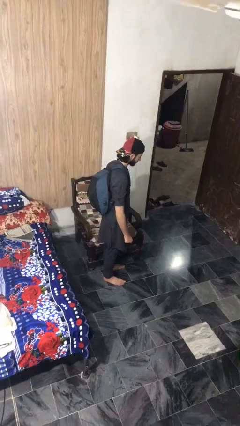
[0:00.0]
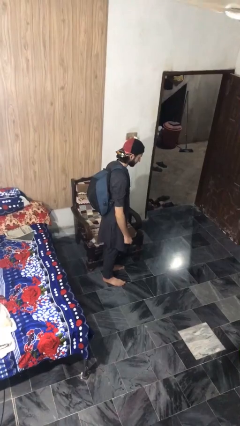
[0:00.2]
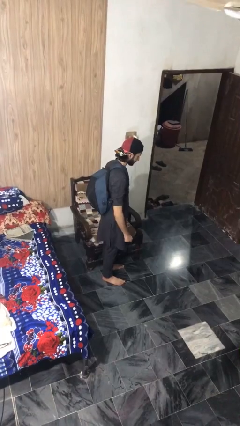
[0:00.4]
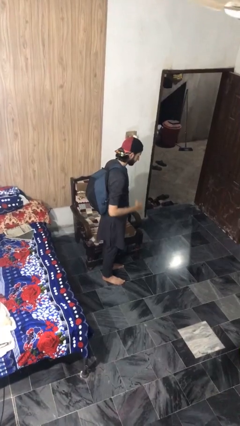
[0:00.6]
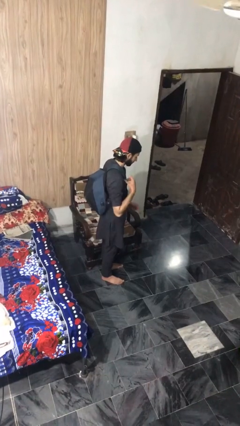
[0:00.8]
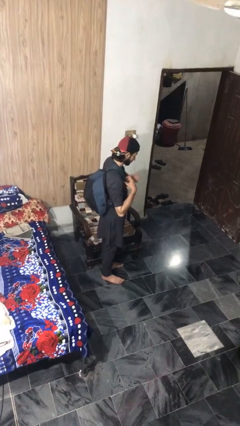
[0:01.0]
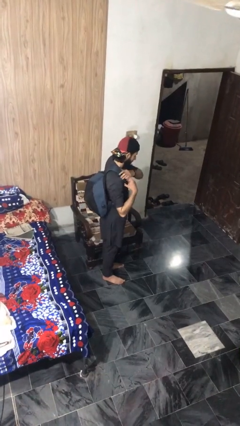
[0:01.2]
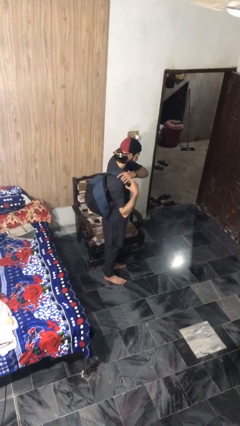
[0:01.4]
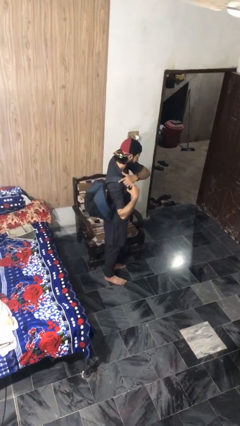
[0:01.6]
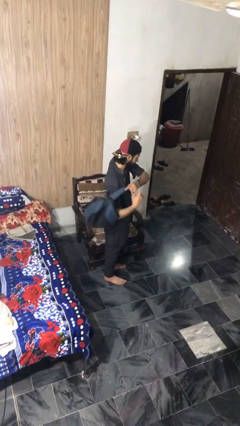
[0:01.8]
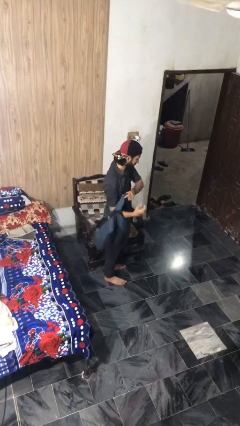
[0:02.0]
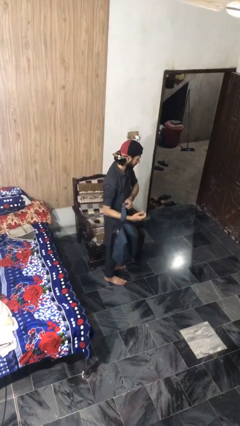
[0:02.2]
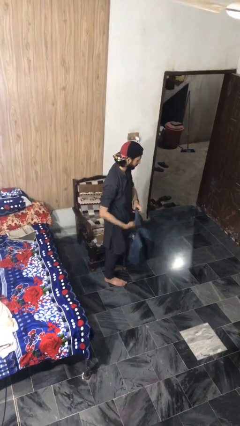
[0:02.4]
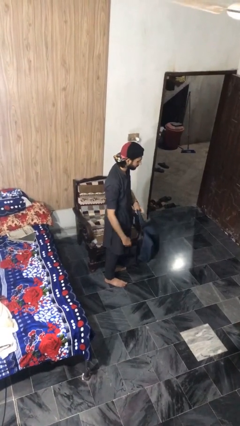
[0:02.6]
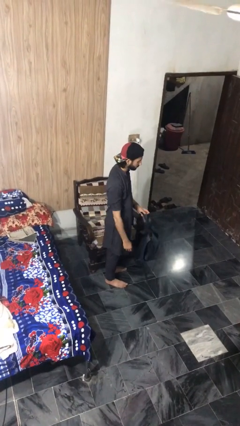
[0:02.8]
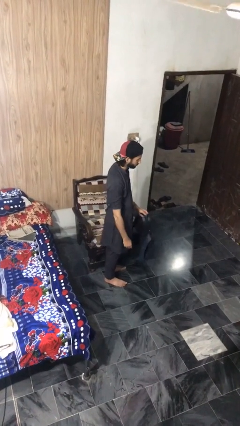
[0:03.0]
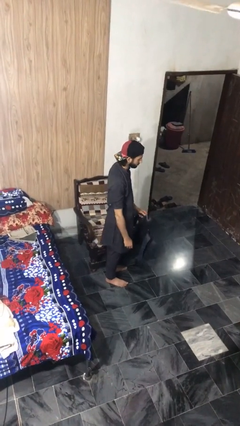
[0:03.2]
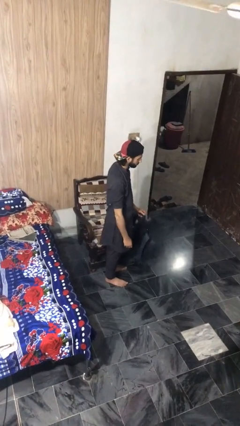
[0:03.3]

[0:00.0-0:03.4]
person takes off backpack

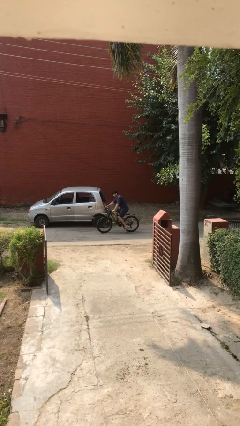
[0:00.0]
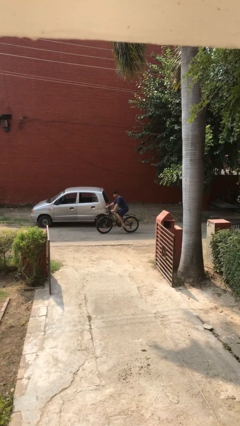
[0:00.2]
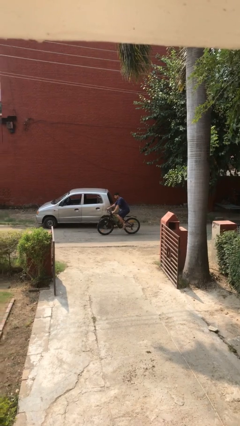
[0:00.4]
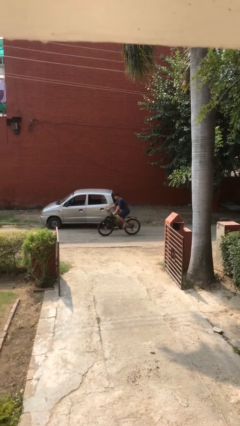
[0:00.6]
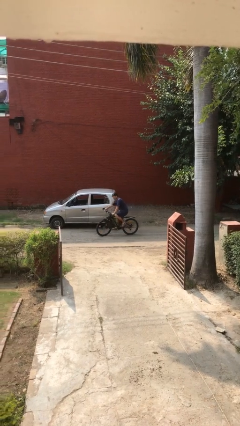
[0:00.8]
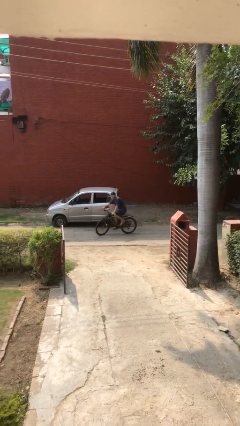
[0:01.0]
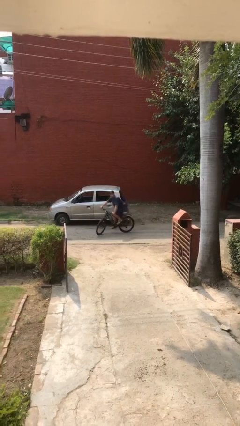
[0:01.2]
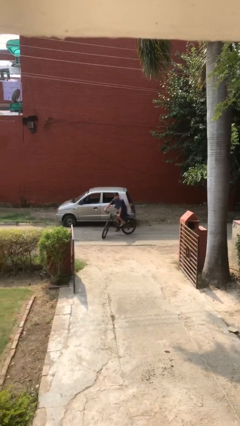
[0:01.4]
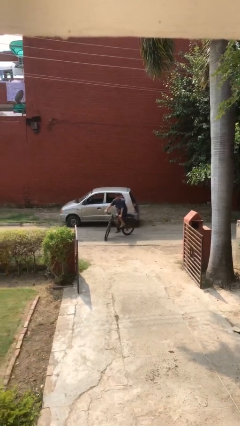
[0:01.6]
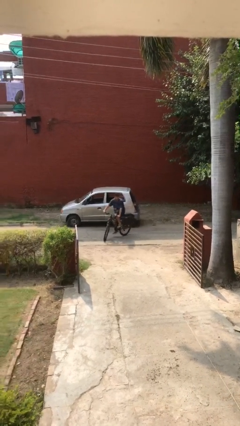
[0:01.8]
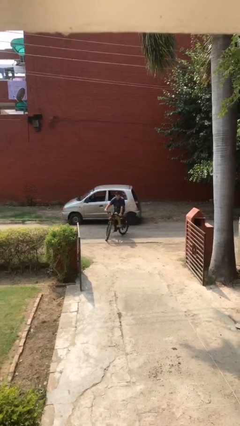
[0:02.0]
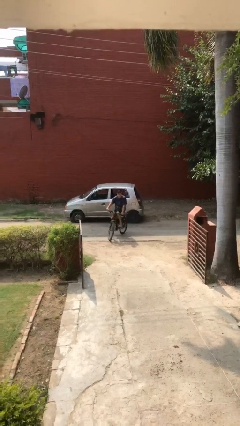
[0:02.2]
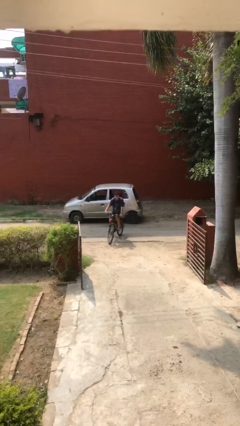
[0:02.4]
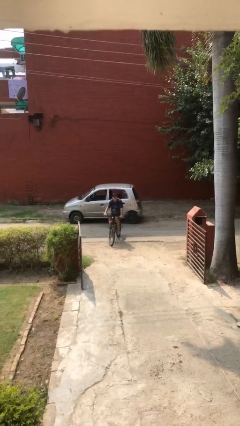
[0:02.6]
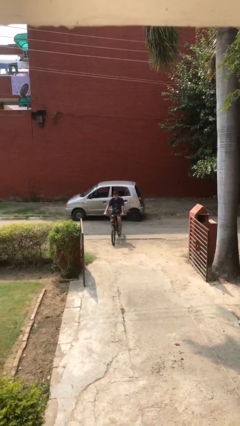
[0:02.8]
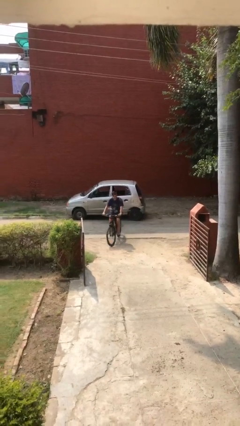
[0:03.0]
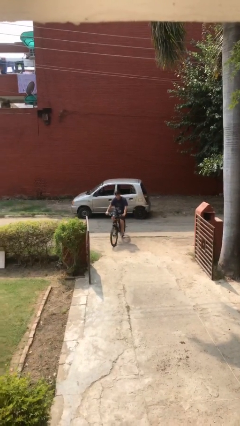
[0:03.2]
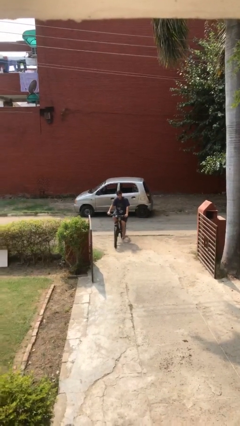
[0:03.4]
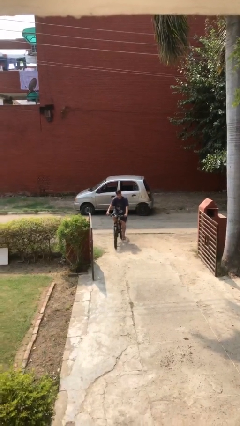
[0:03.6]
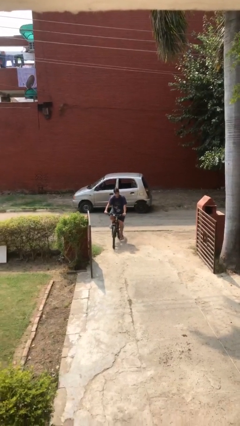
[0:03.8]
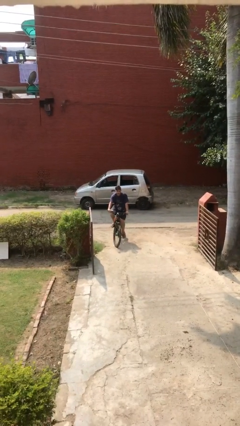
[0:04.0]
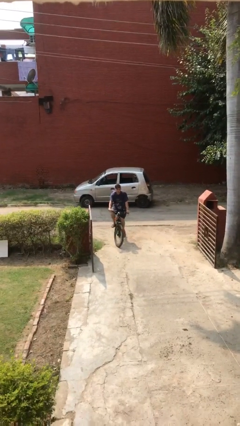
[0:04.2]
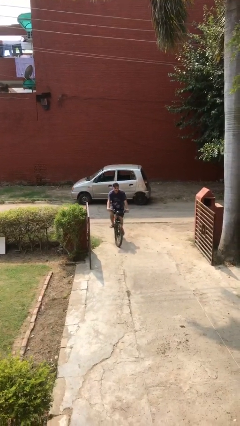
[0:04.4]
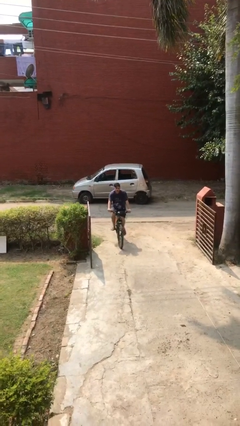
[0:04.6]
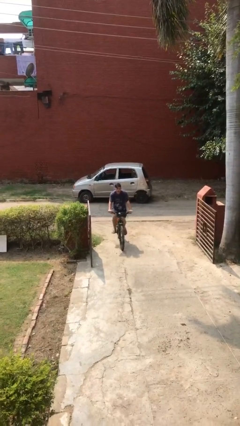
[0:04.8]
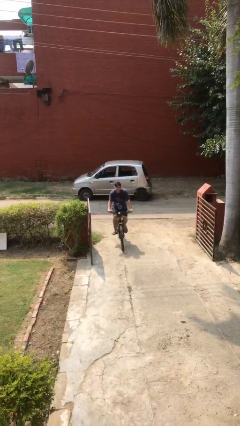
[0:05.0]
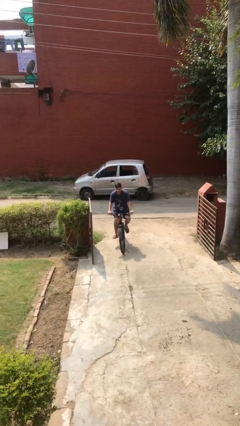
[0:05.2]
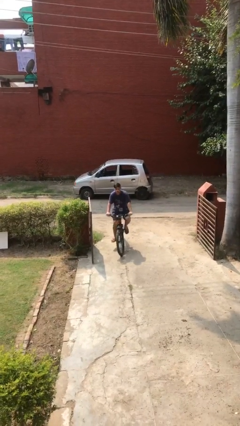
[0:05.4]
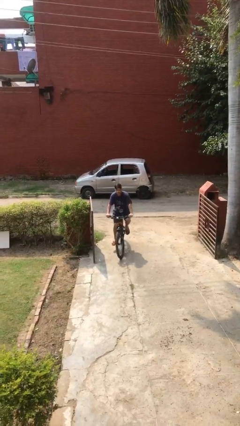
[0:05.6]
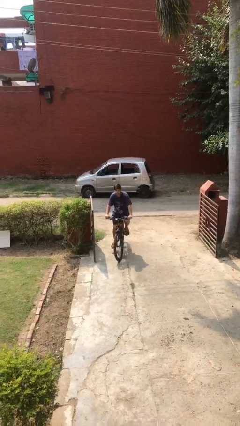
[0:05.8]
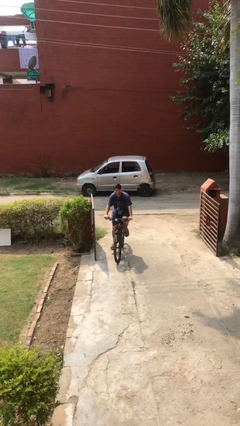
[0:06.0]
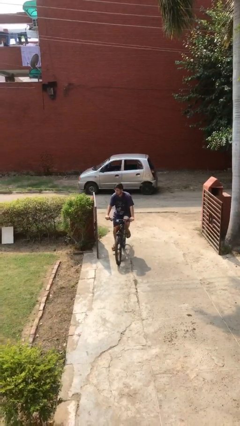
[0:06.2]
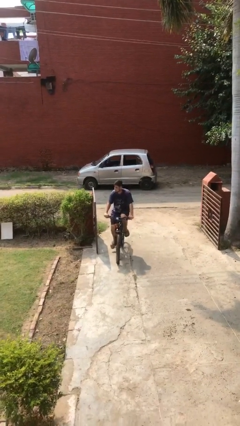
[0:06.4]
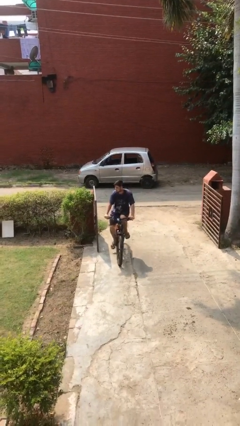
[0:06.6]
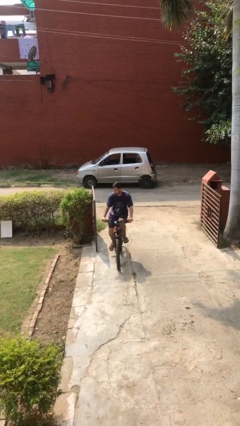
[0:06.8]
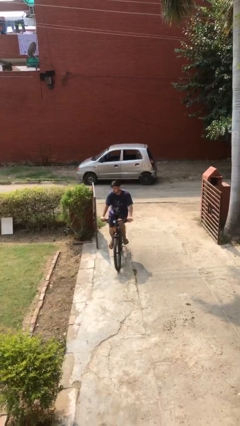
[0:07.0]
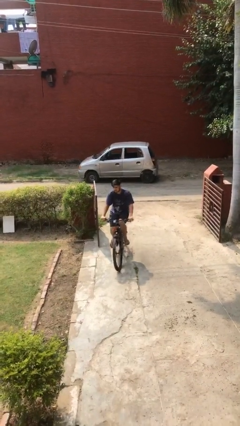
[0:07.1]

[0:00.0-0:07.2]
person rides bicycle

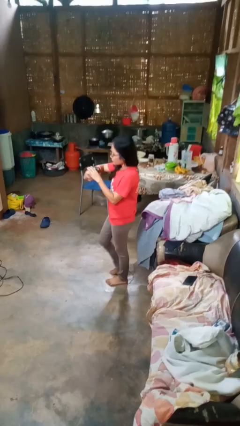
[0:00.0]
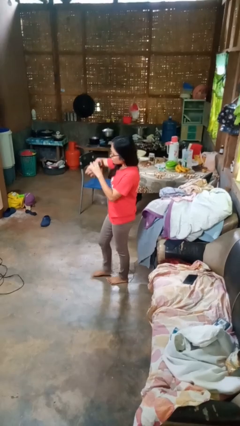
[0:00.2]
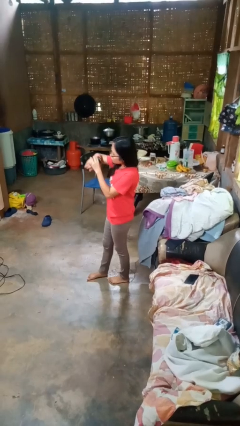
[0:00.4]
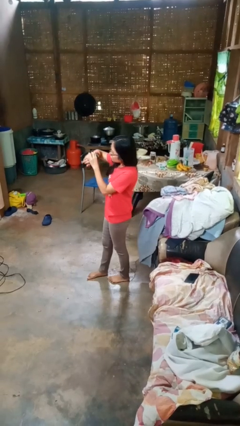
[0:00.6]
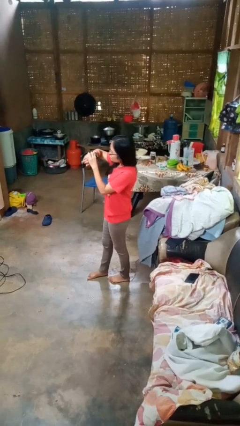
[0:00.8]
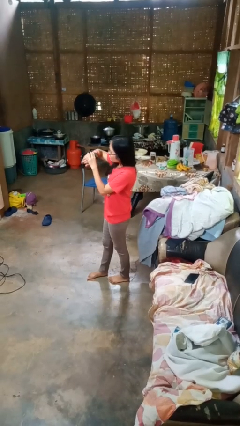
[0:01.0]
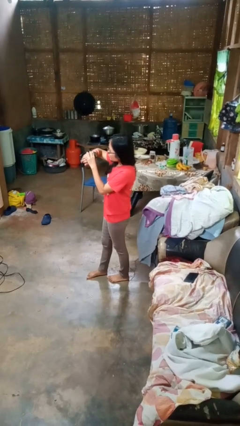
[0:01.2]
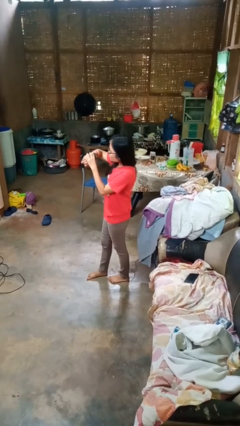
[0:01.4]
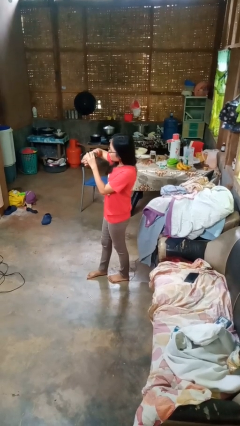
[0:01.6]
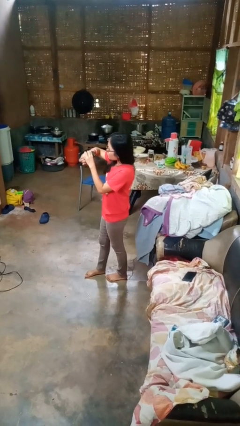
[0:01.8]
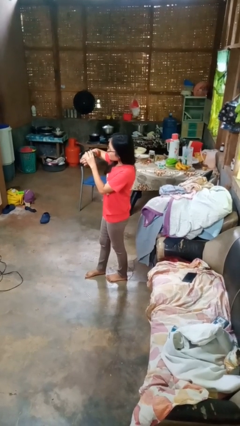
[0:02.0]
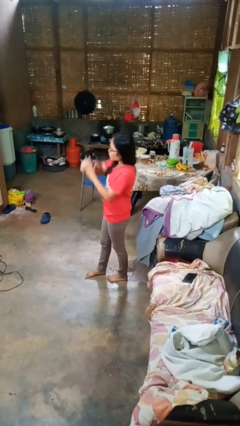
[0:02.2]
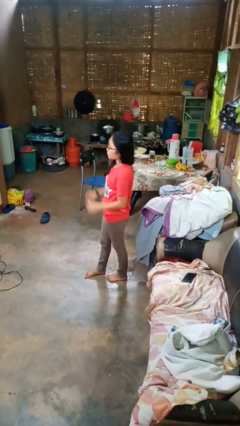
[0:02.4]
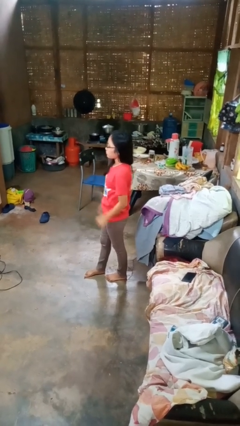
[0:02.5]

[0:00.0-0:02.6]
person looks at wristwatch

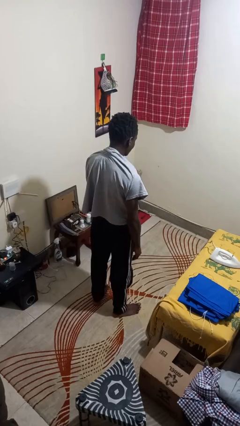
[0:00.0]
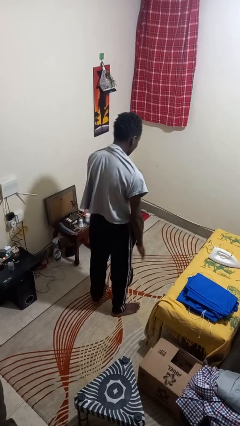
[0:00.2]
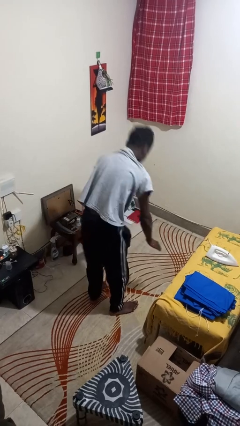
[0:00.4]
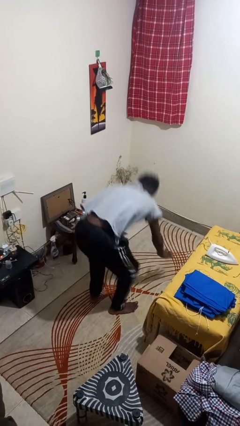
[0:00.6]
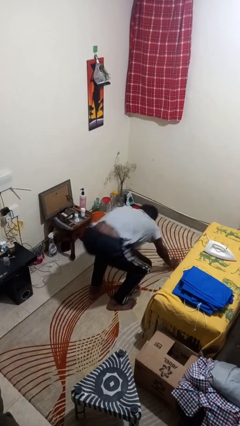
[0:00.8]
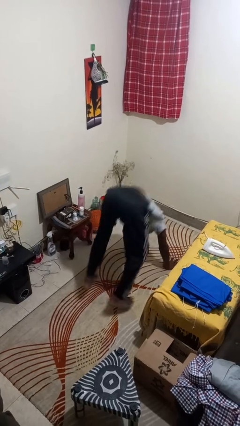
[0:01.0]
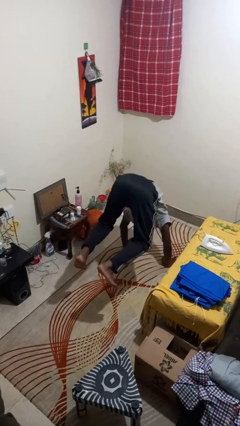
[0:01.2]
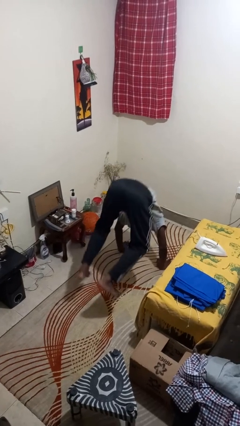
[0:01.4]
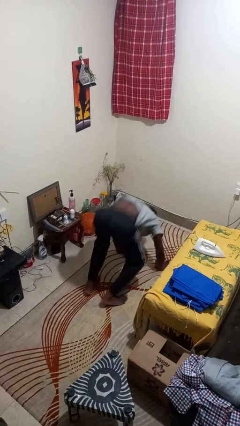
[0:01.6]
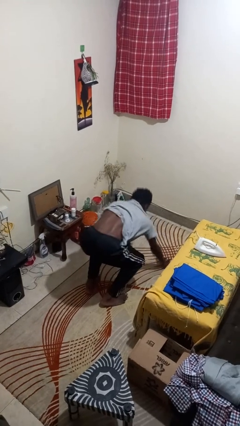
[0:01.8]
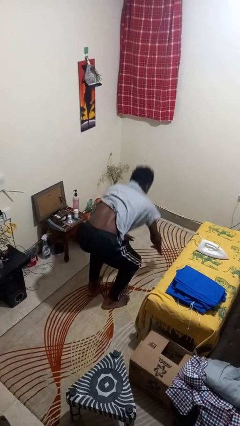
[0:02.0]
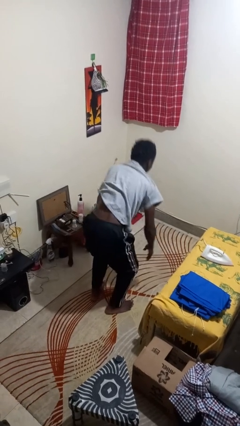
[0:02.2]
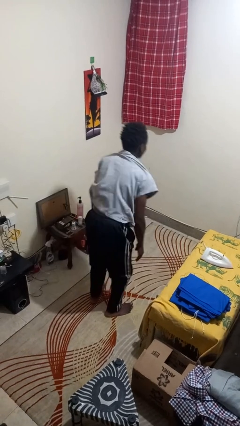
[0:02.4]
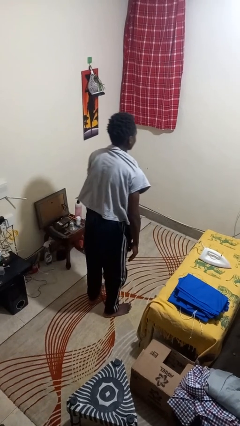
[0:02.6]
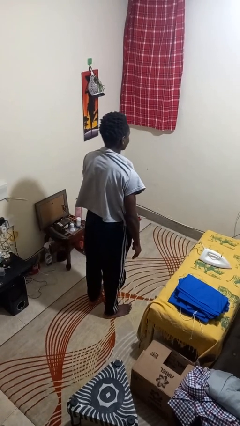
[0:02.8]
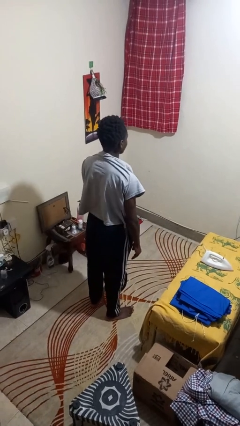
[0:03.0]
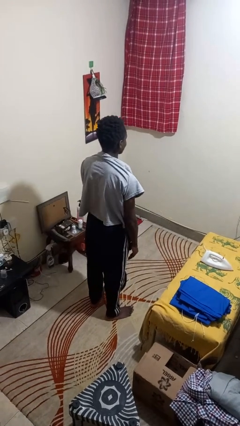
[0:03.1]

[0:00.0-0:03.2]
person handstand

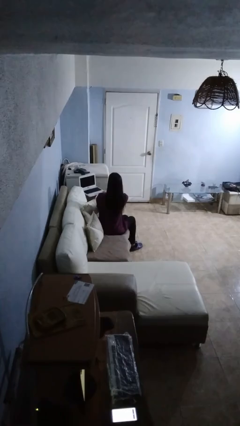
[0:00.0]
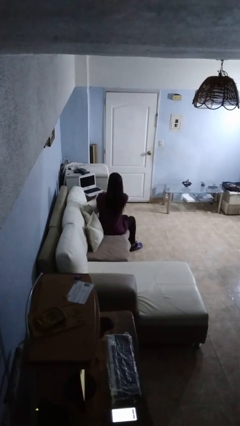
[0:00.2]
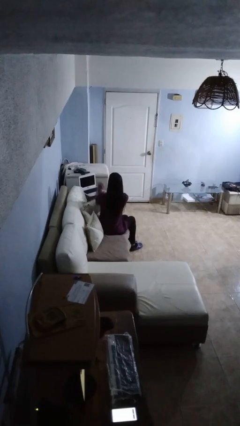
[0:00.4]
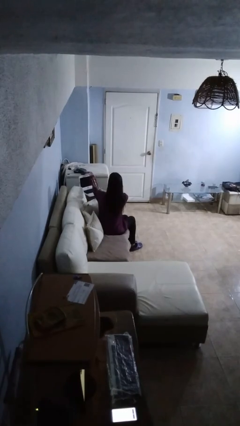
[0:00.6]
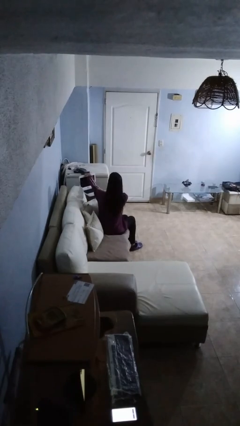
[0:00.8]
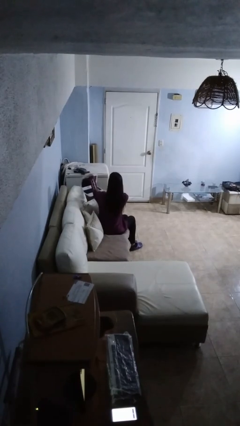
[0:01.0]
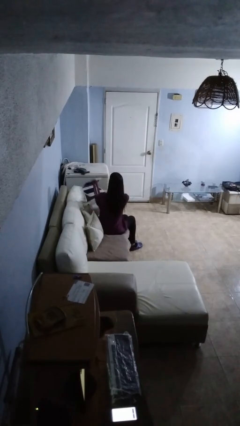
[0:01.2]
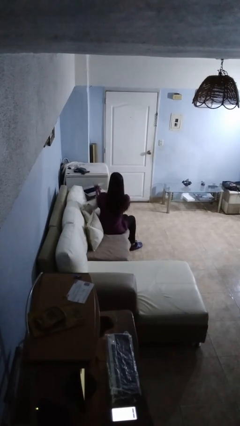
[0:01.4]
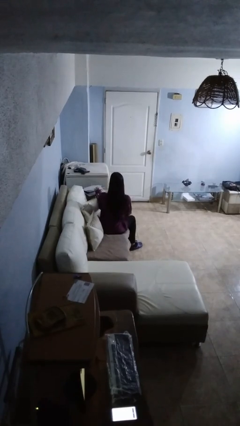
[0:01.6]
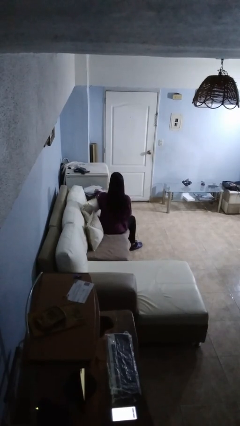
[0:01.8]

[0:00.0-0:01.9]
person closes laptop
